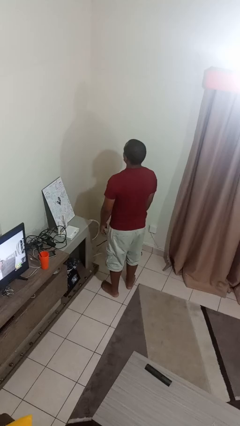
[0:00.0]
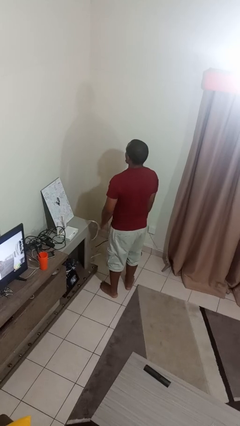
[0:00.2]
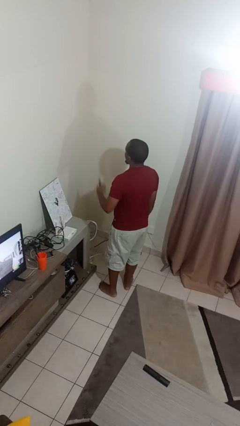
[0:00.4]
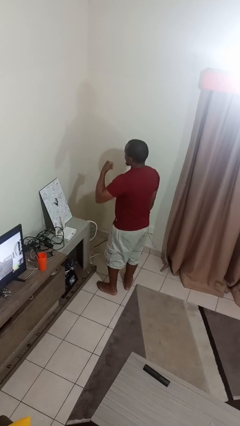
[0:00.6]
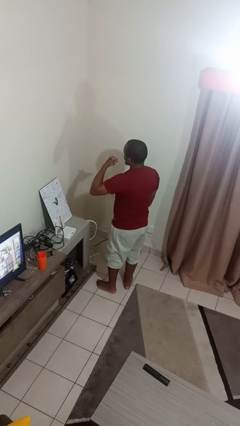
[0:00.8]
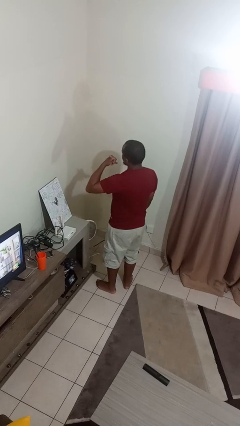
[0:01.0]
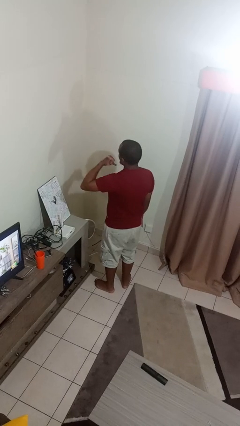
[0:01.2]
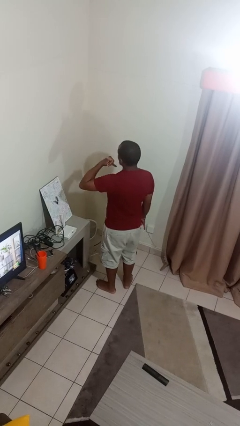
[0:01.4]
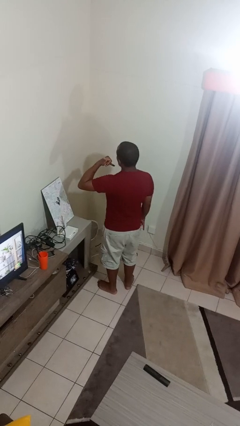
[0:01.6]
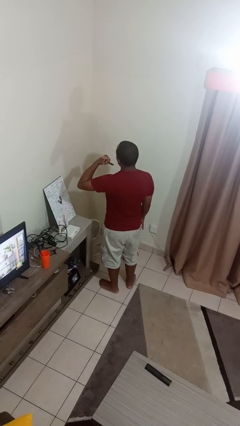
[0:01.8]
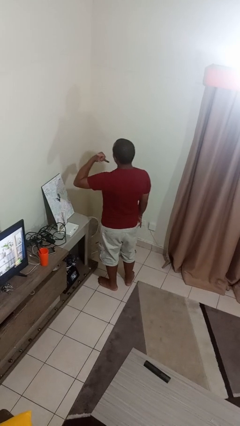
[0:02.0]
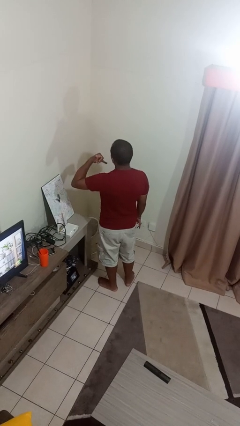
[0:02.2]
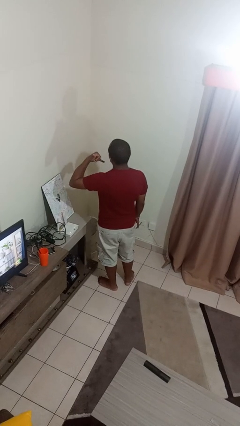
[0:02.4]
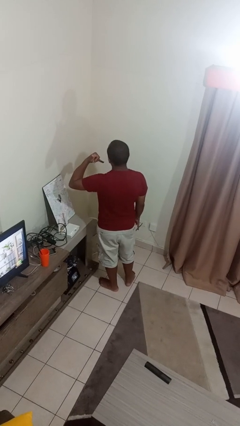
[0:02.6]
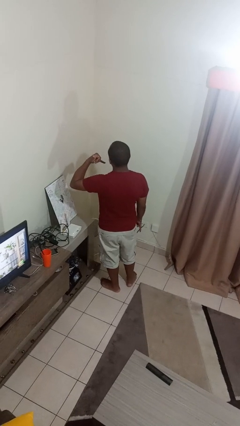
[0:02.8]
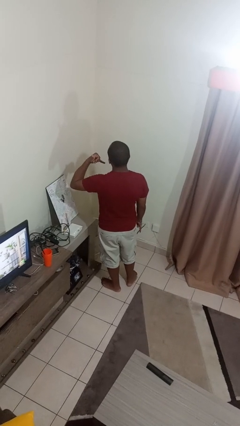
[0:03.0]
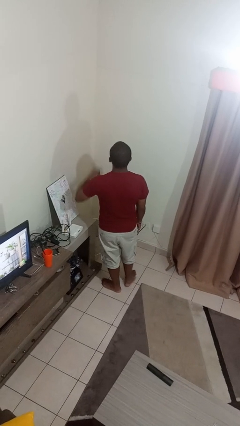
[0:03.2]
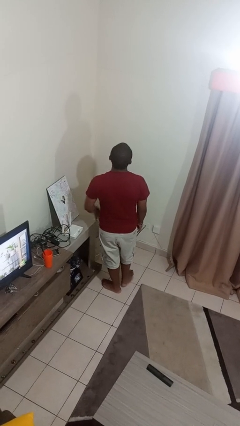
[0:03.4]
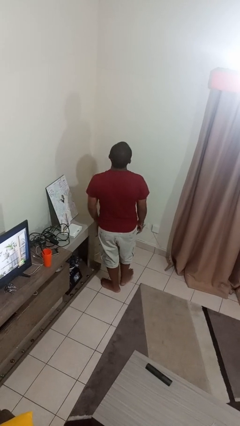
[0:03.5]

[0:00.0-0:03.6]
person gestures call me

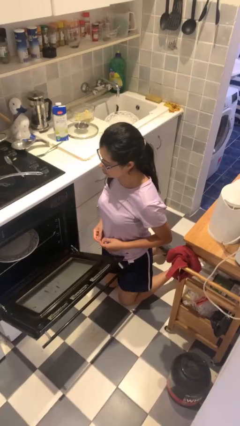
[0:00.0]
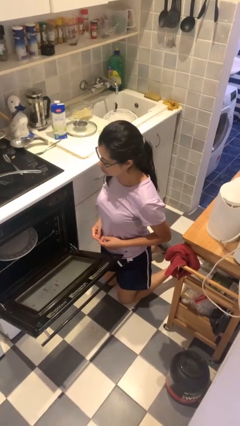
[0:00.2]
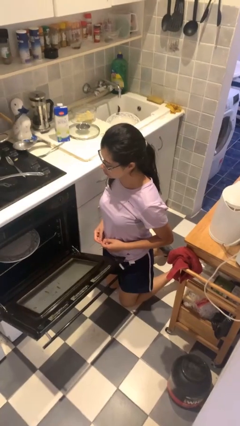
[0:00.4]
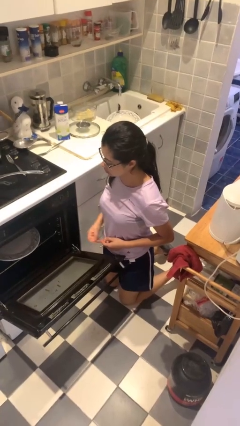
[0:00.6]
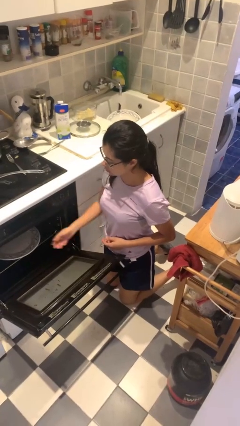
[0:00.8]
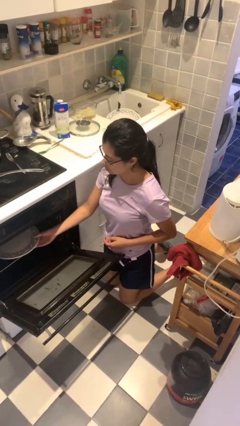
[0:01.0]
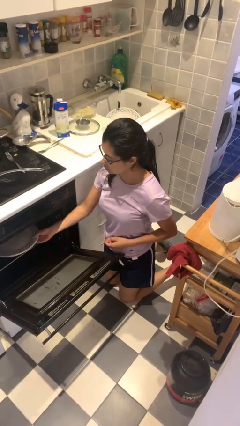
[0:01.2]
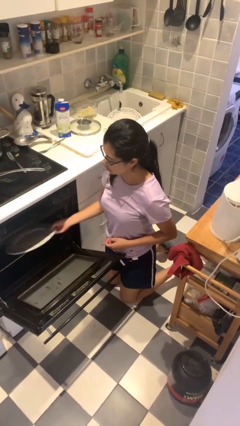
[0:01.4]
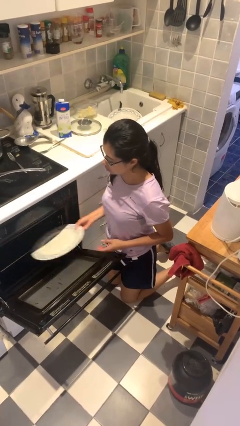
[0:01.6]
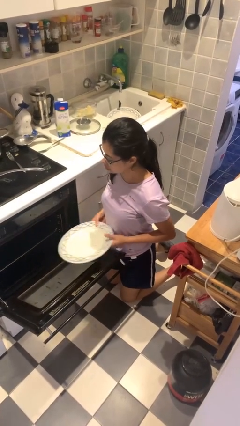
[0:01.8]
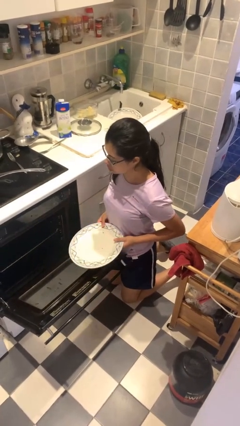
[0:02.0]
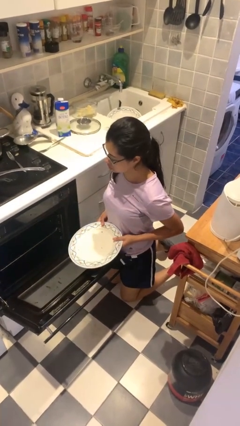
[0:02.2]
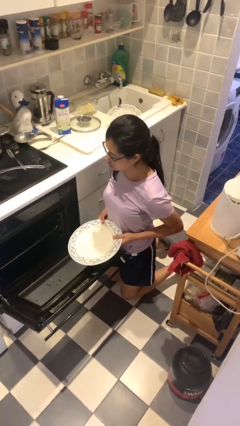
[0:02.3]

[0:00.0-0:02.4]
person unloads dishwasher

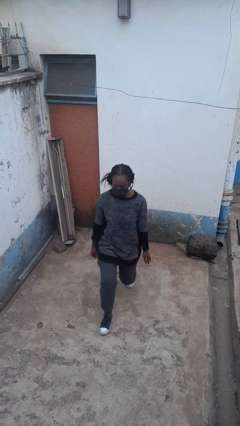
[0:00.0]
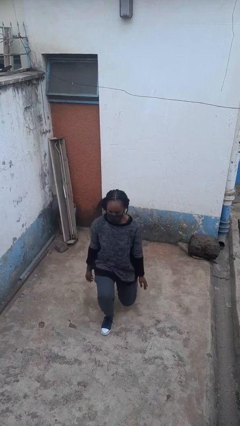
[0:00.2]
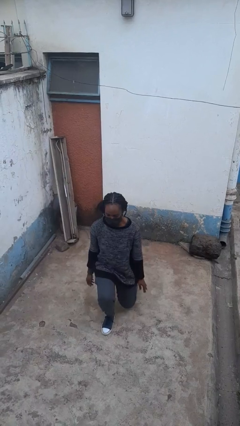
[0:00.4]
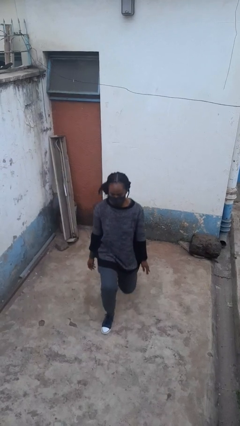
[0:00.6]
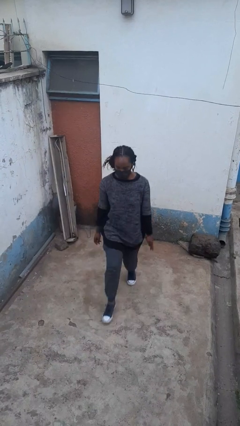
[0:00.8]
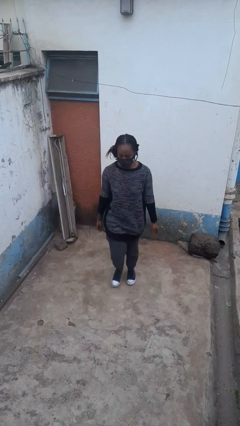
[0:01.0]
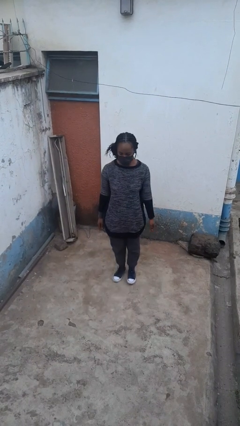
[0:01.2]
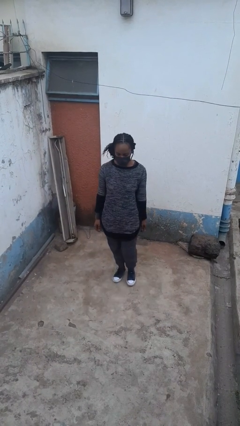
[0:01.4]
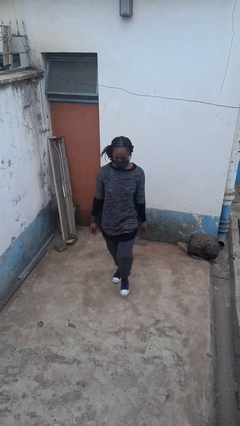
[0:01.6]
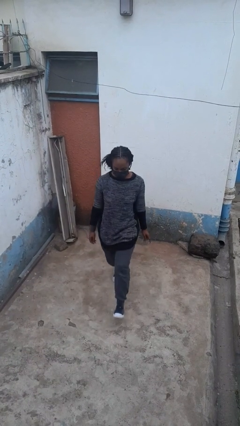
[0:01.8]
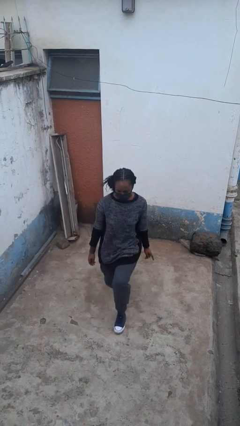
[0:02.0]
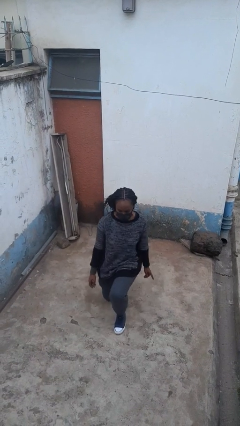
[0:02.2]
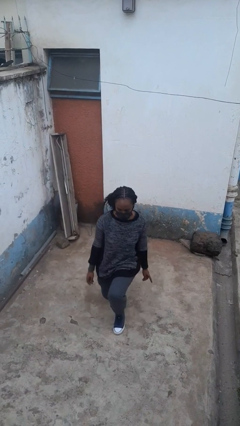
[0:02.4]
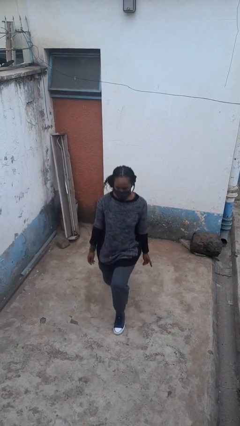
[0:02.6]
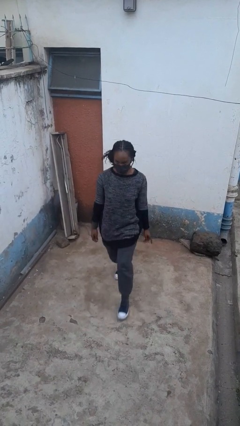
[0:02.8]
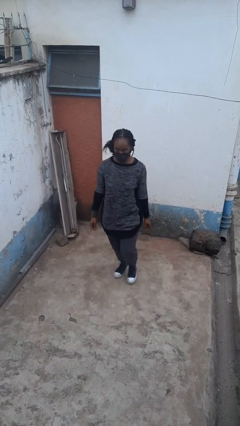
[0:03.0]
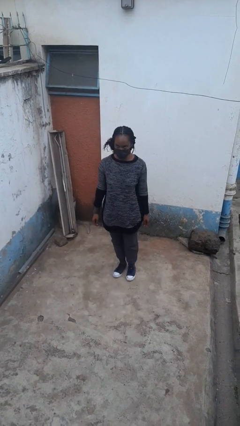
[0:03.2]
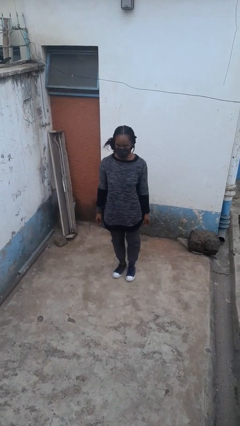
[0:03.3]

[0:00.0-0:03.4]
person exercises with lunges

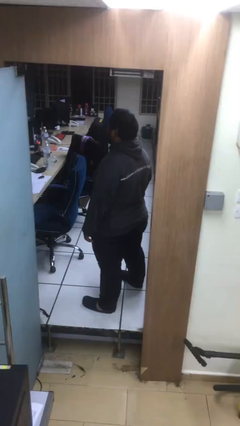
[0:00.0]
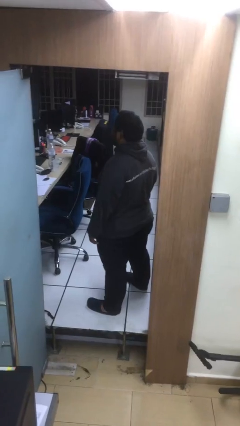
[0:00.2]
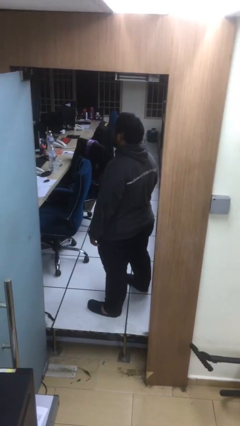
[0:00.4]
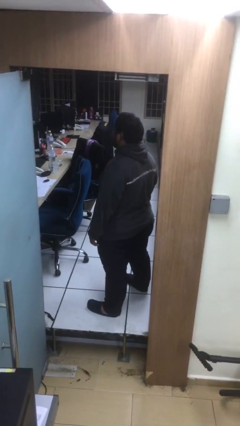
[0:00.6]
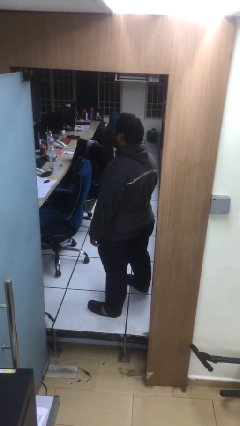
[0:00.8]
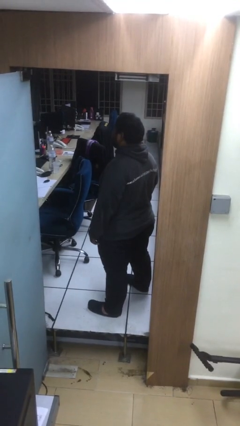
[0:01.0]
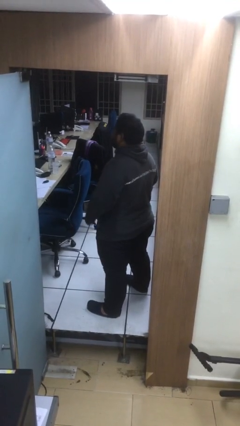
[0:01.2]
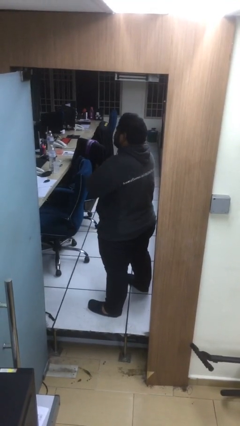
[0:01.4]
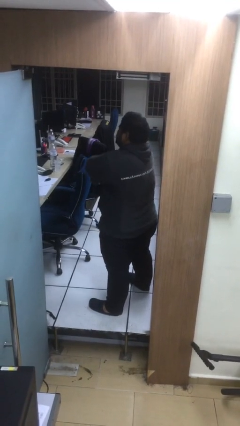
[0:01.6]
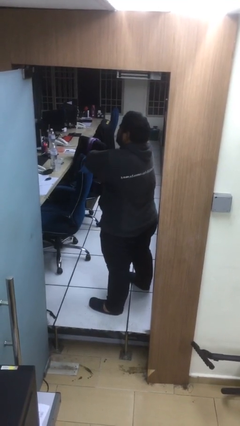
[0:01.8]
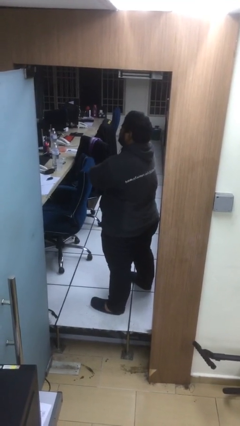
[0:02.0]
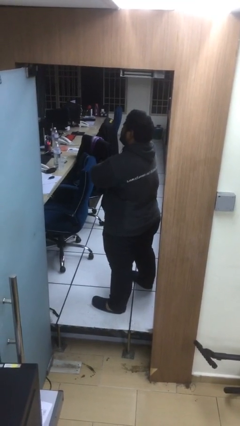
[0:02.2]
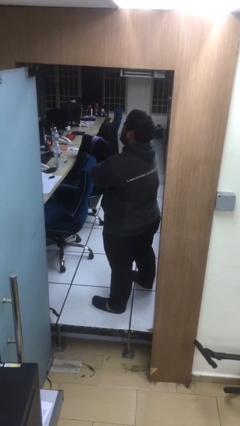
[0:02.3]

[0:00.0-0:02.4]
person crosses arms

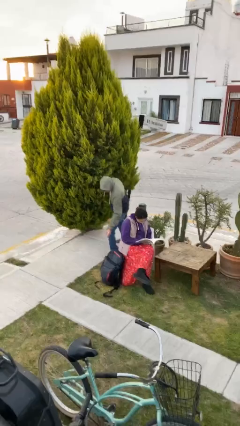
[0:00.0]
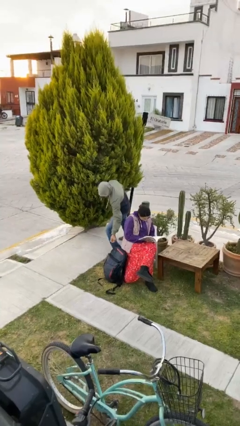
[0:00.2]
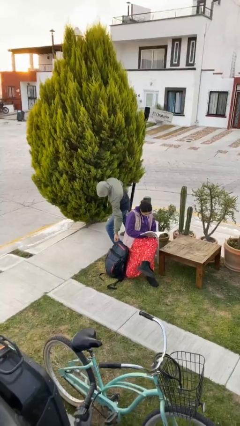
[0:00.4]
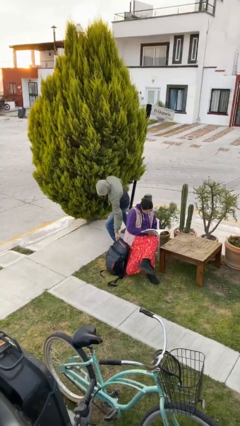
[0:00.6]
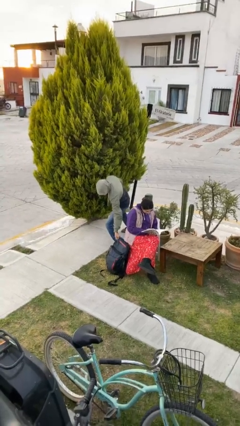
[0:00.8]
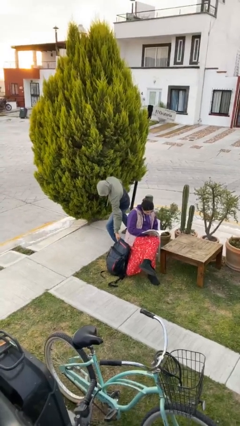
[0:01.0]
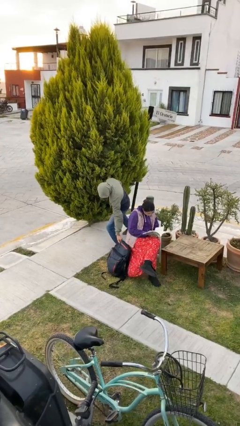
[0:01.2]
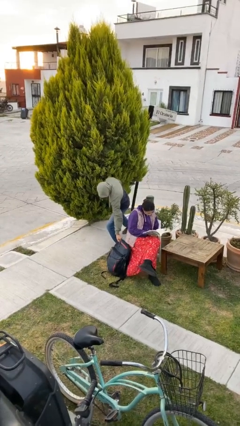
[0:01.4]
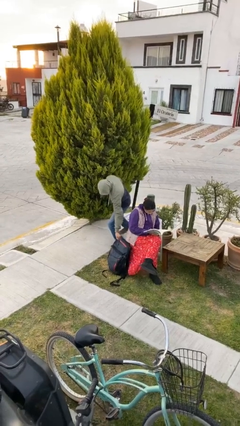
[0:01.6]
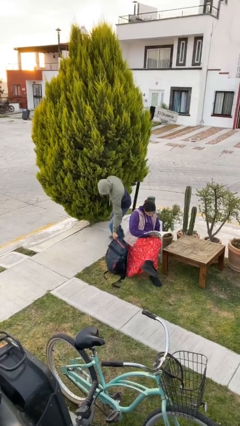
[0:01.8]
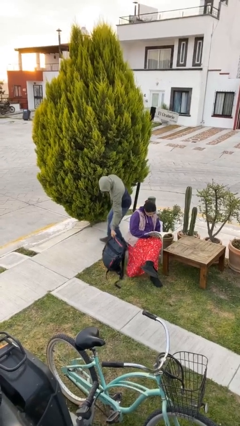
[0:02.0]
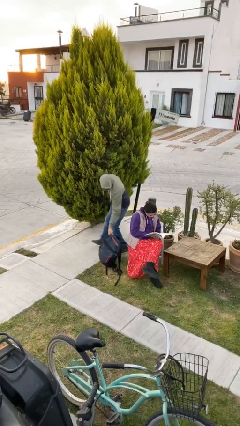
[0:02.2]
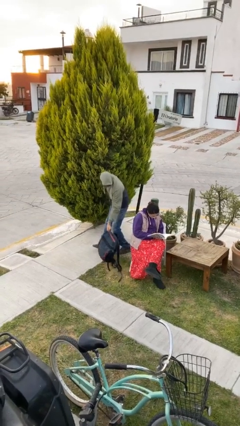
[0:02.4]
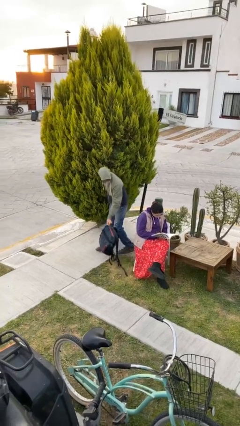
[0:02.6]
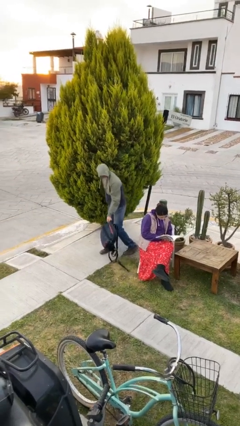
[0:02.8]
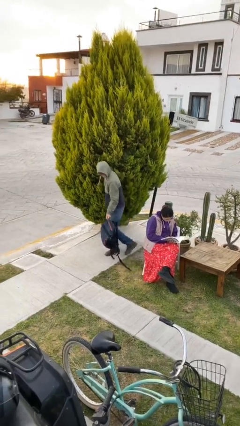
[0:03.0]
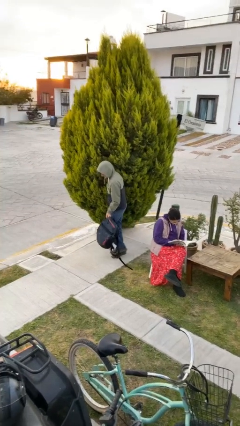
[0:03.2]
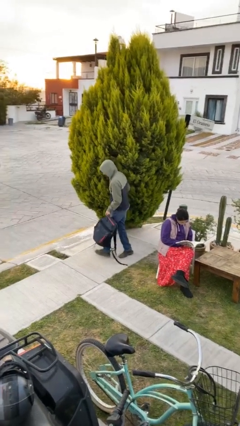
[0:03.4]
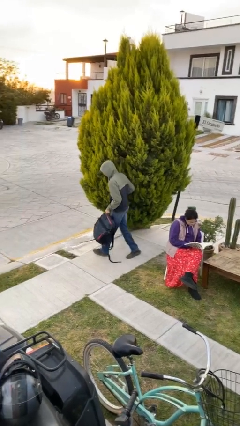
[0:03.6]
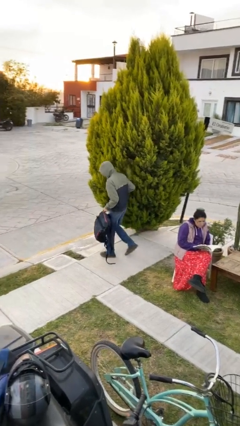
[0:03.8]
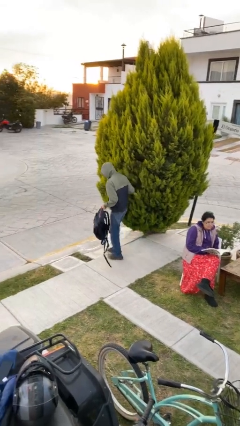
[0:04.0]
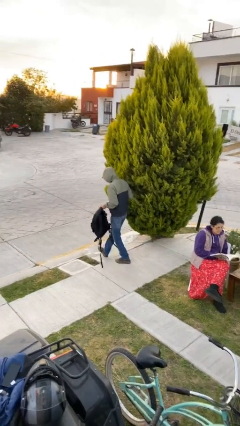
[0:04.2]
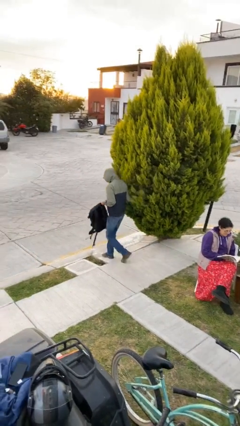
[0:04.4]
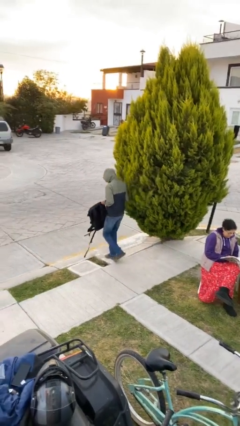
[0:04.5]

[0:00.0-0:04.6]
person steals object from person

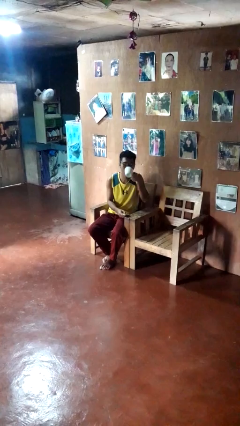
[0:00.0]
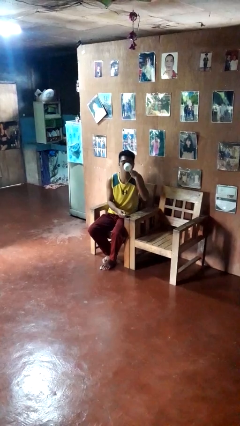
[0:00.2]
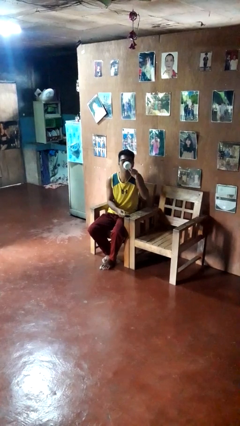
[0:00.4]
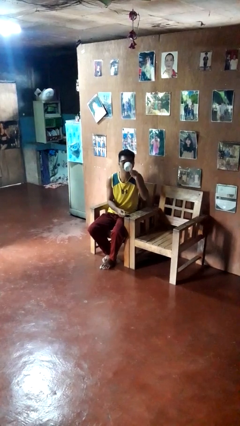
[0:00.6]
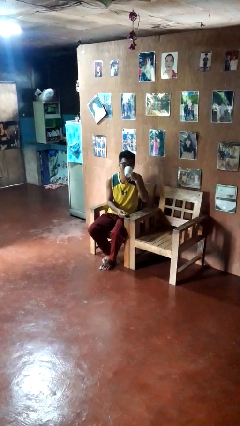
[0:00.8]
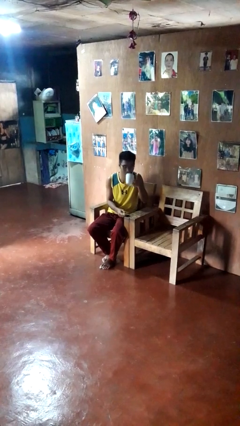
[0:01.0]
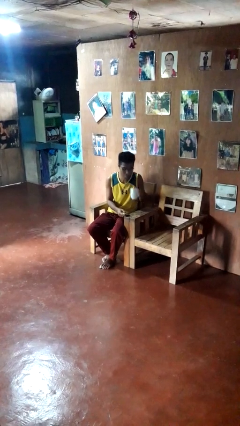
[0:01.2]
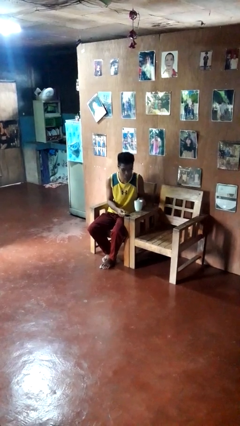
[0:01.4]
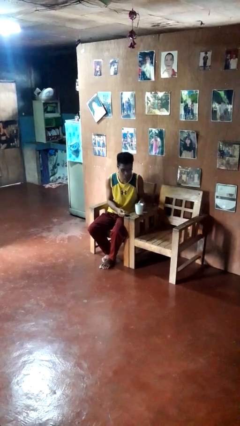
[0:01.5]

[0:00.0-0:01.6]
person drinks from cup
